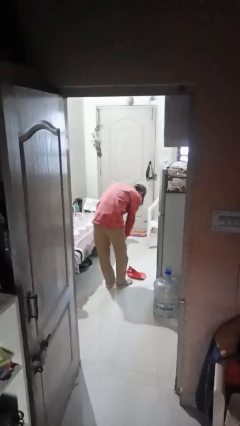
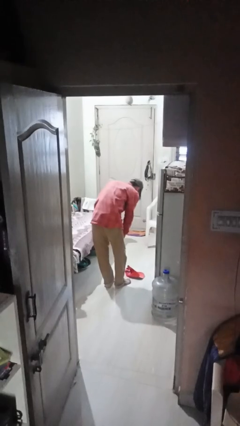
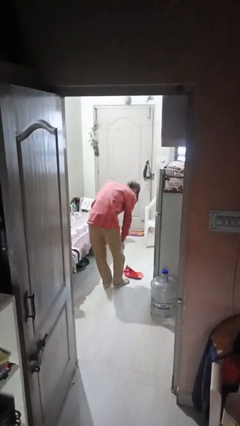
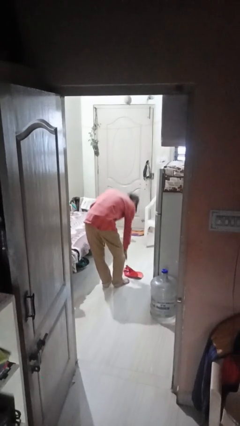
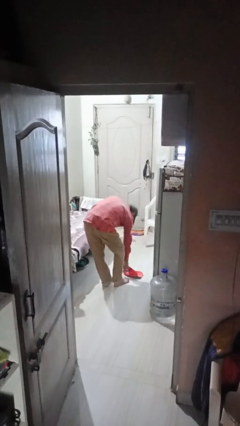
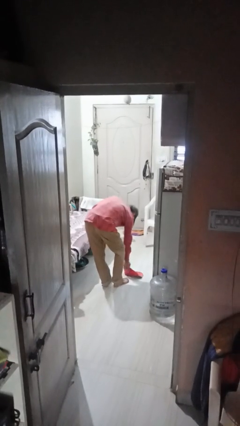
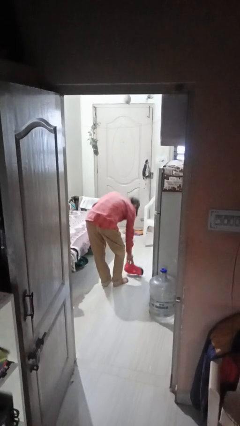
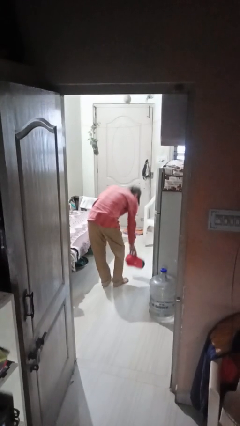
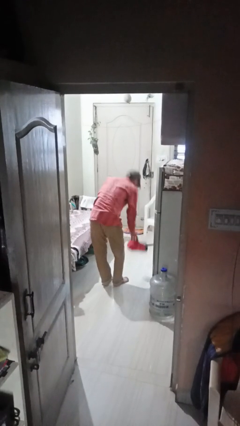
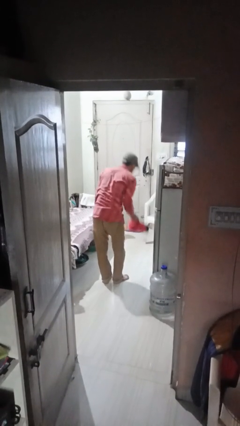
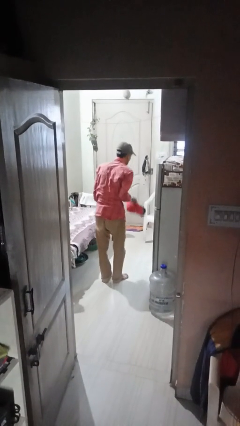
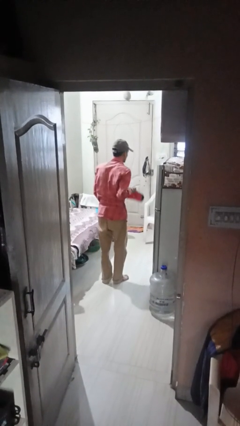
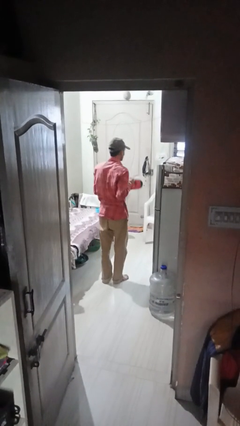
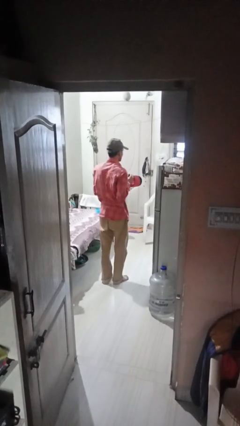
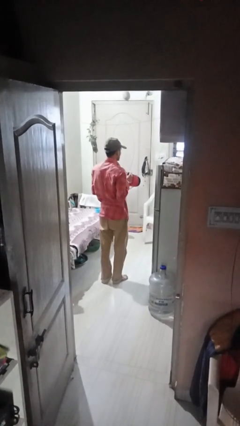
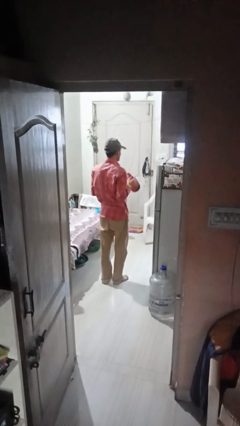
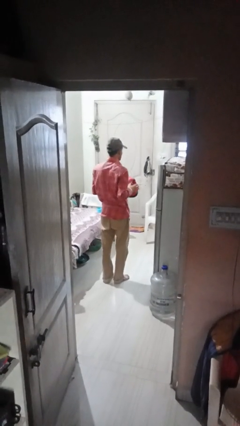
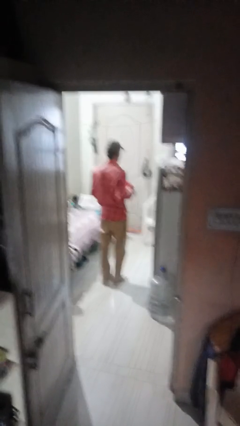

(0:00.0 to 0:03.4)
person picks up object from floor

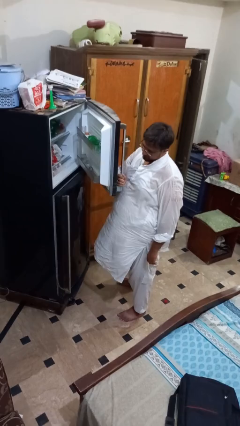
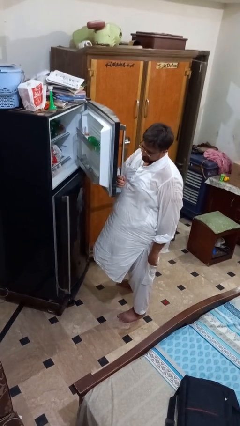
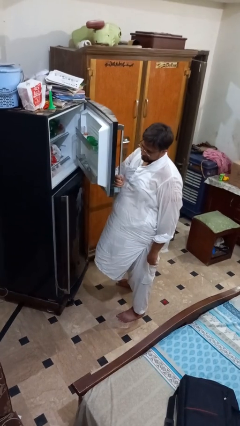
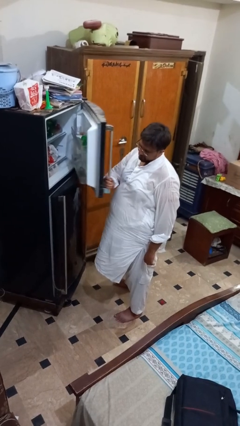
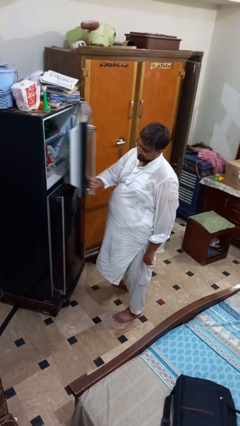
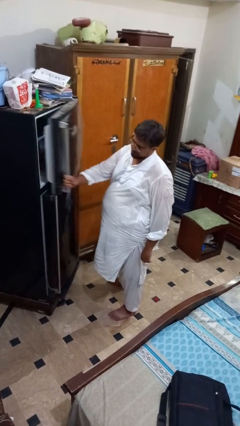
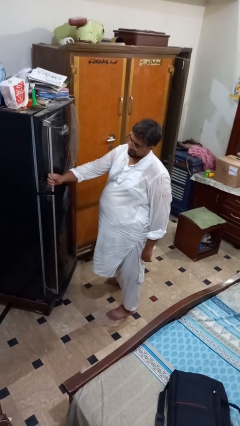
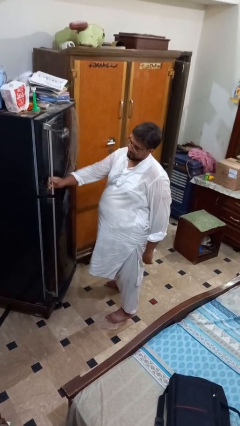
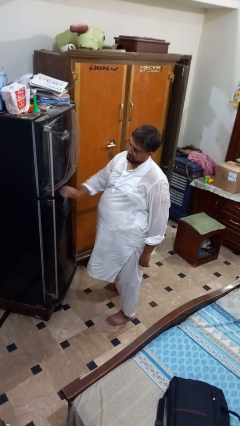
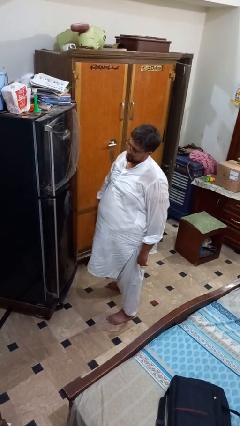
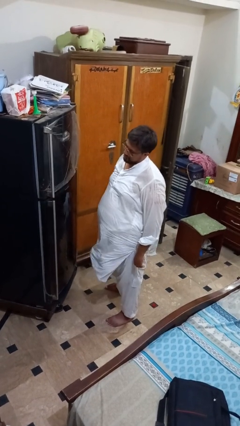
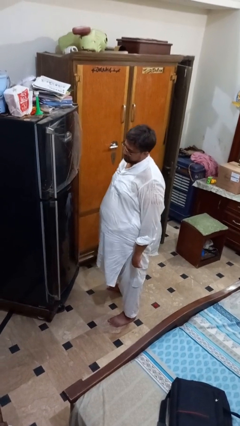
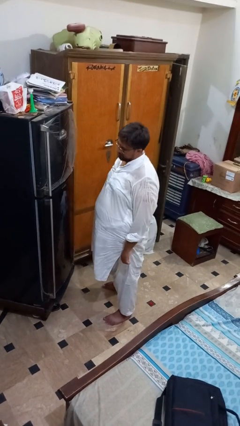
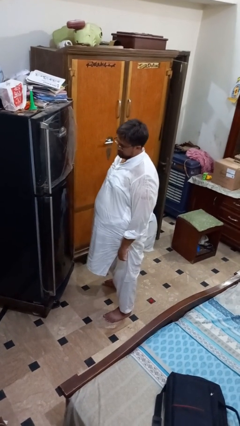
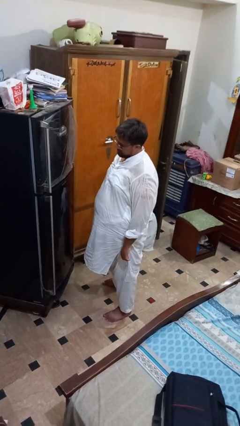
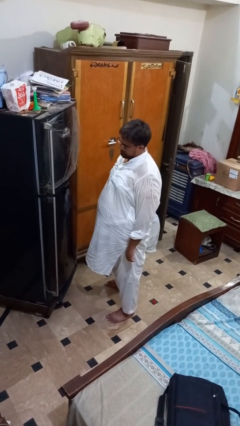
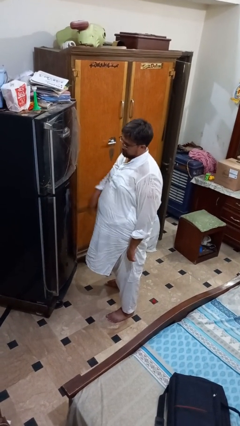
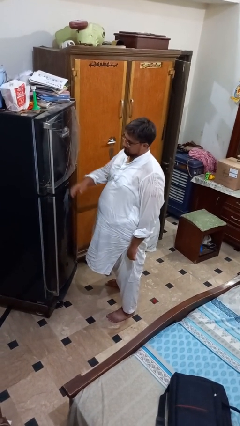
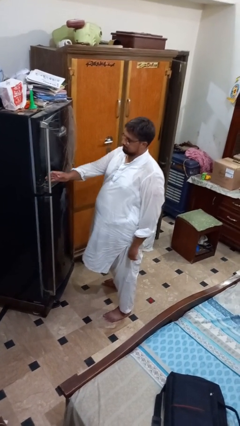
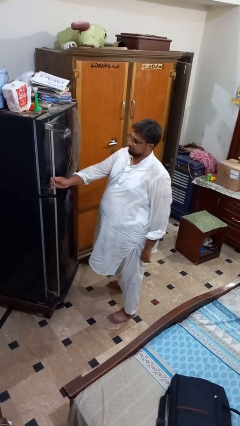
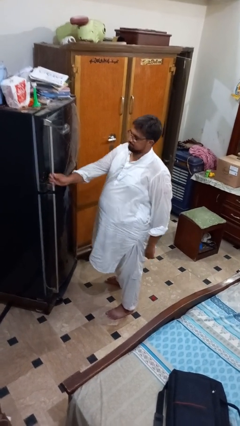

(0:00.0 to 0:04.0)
person closes refrigerator

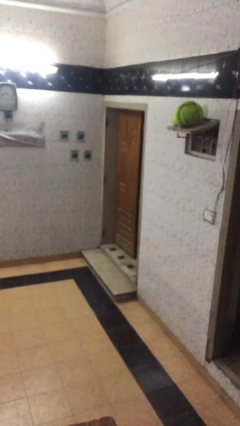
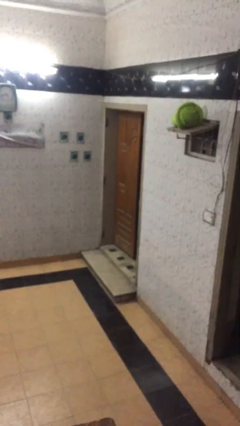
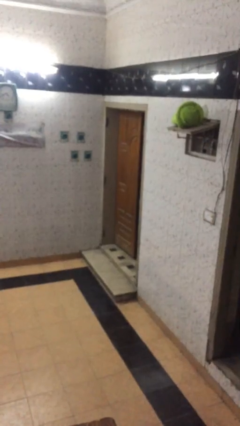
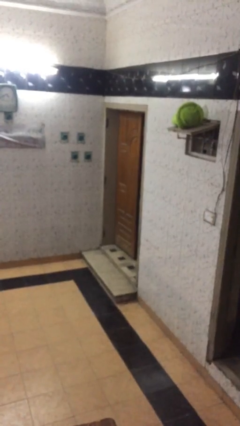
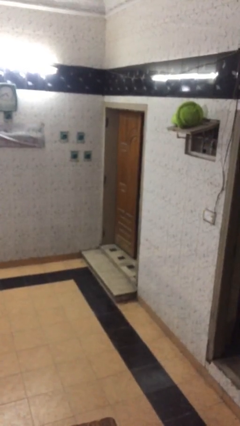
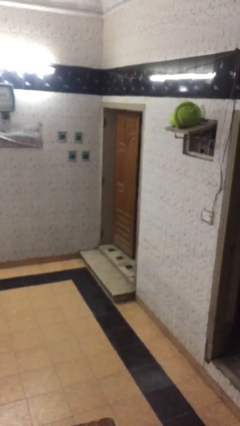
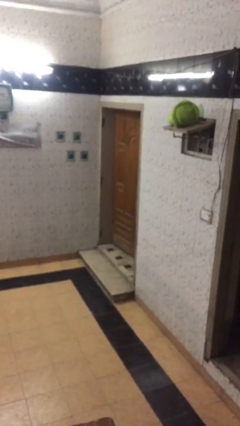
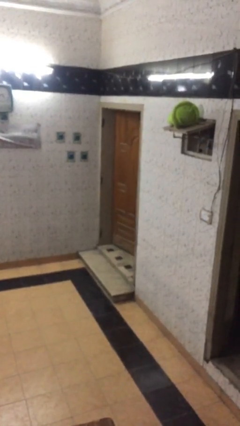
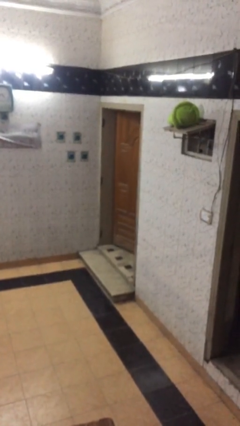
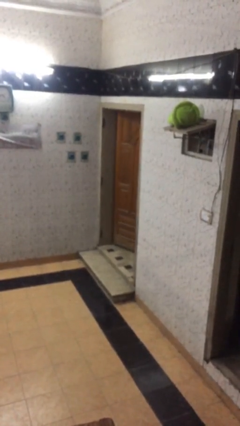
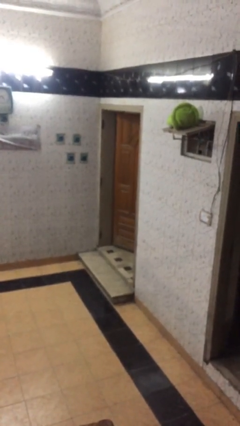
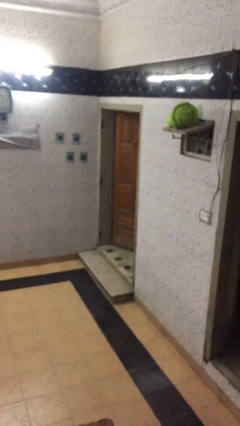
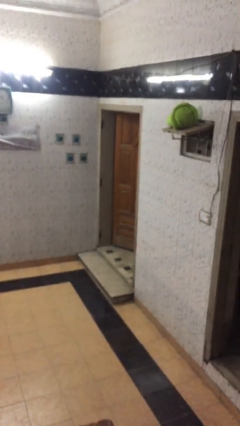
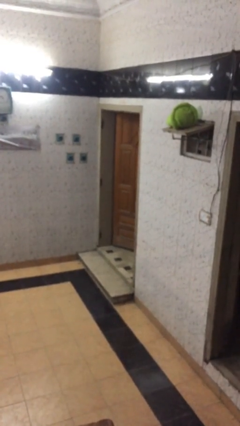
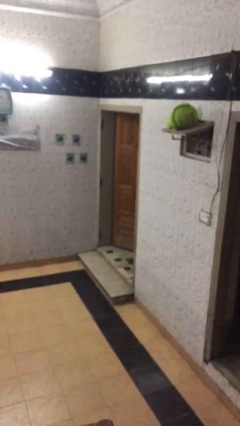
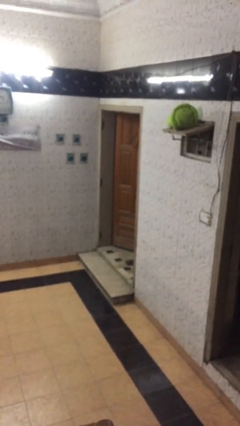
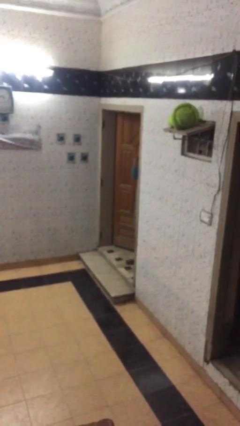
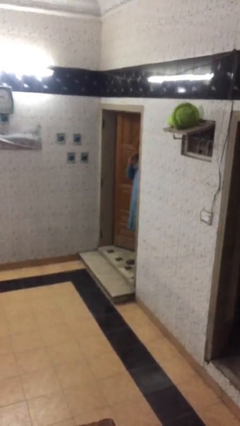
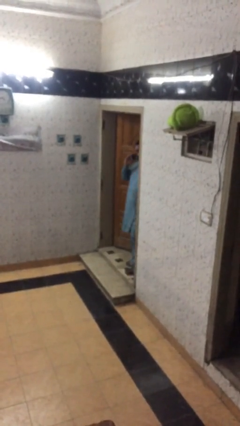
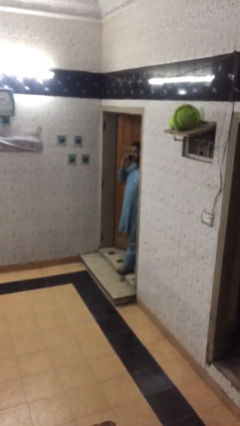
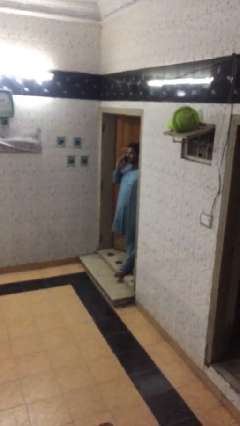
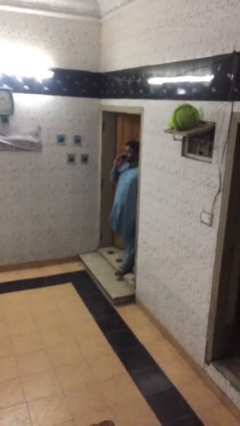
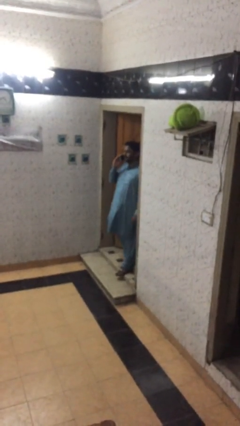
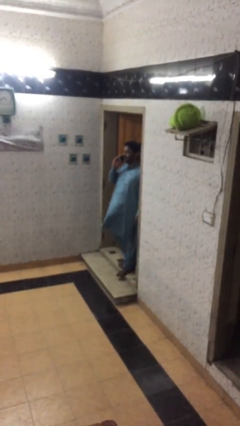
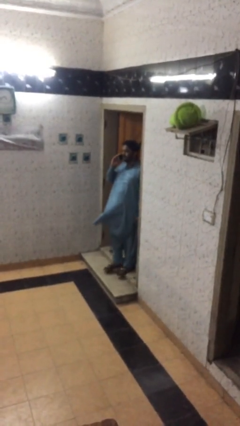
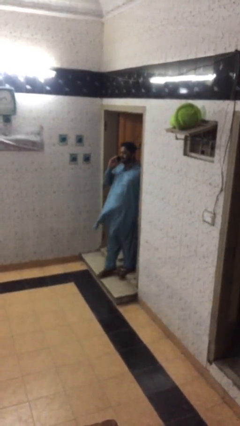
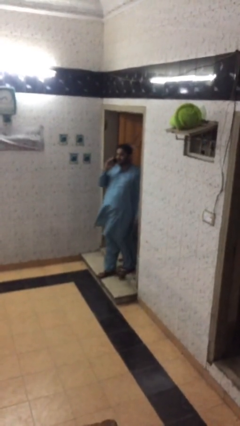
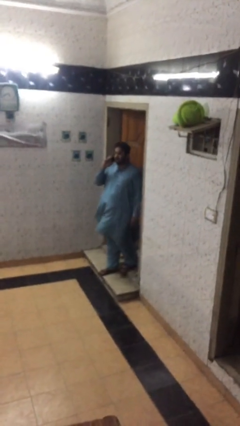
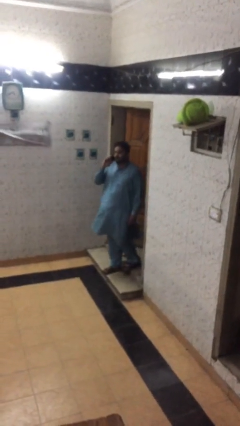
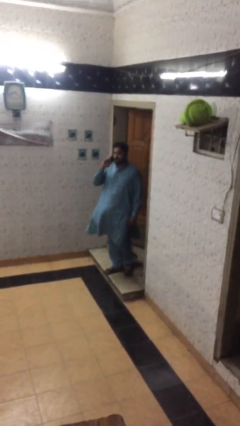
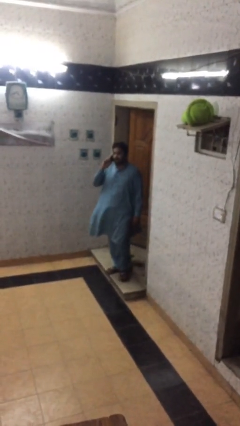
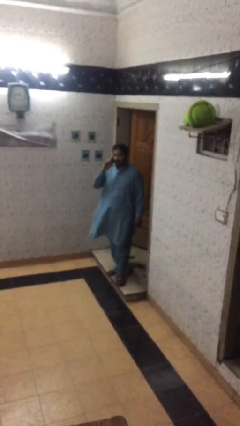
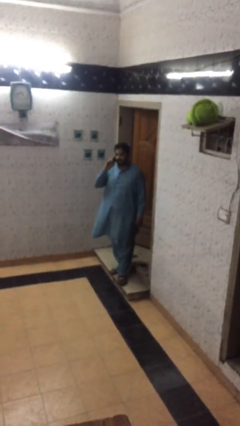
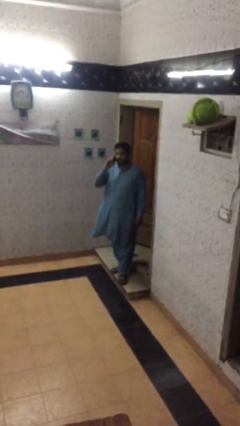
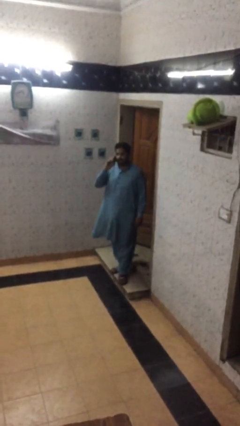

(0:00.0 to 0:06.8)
person enters scene through structure

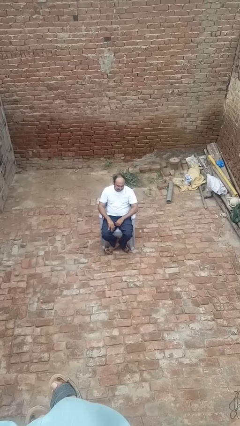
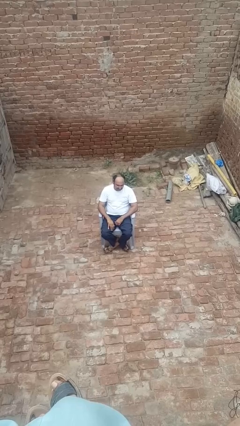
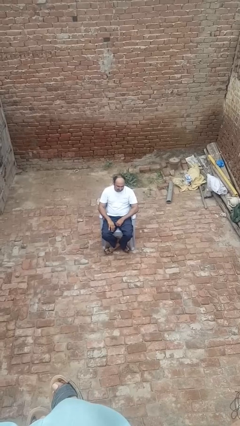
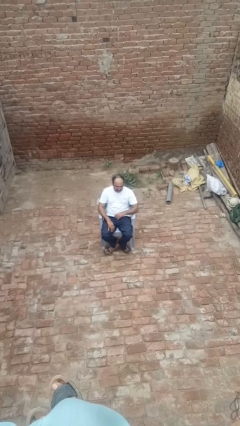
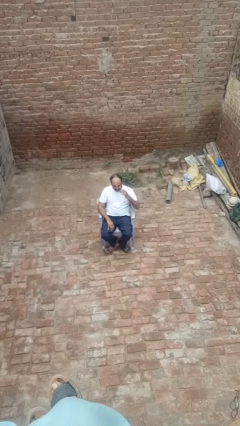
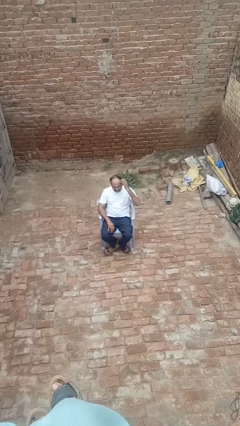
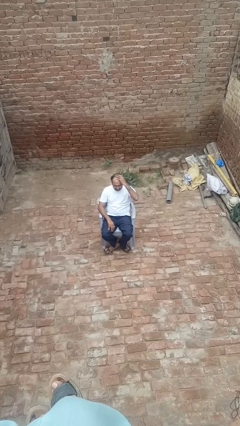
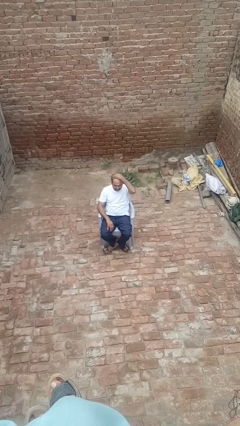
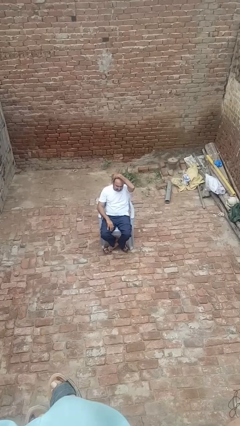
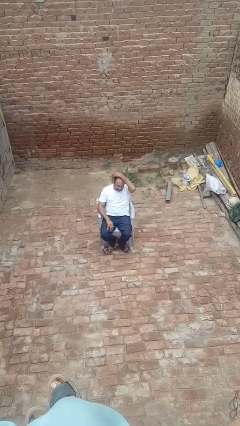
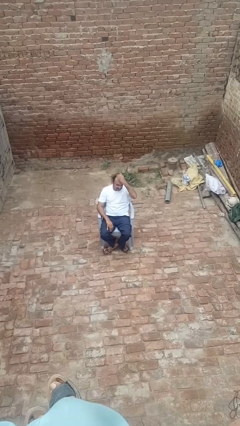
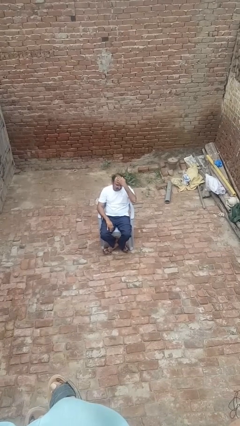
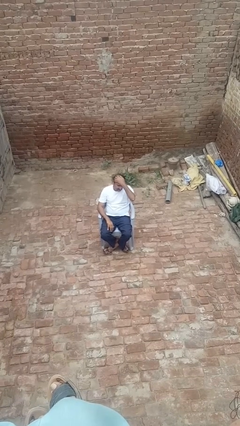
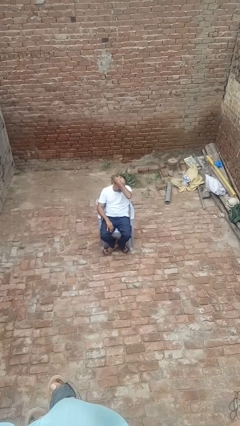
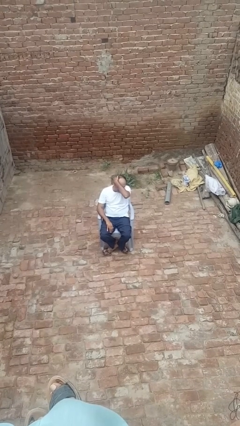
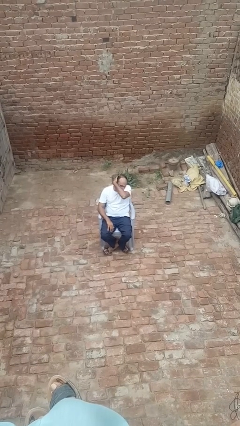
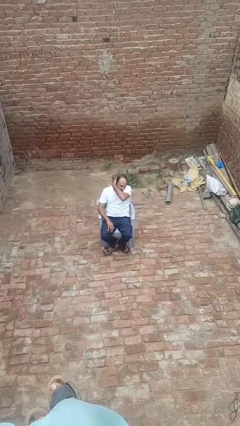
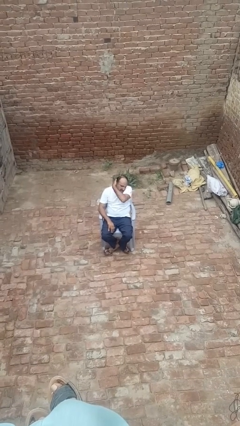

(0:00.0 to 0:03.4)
person strokes hair

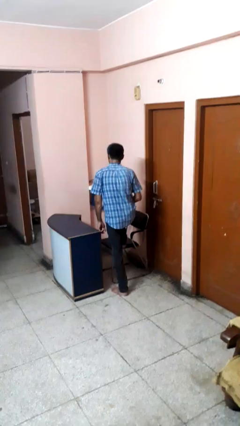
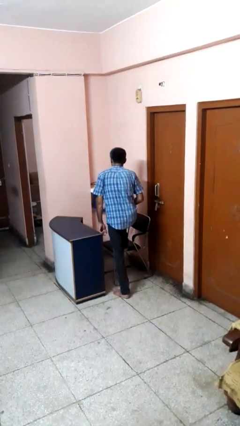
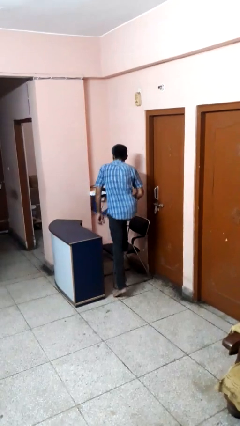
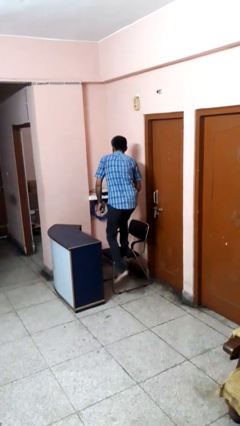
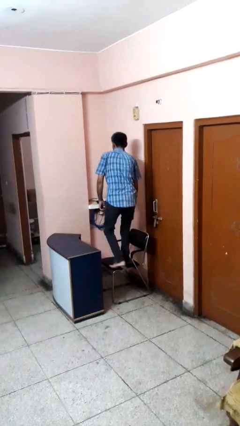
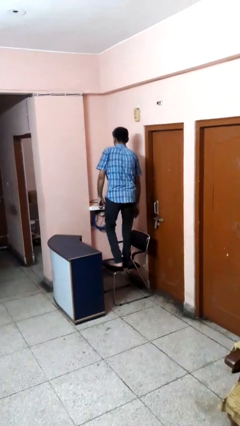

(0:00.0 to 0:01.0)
person climbs on chair
